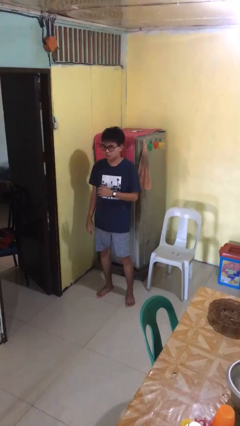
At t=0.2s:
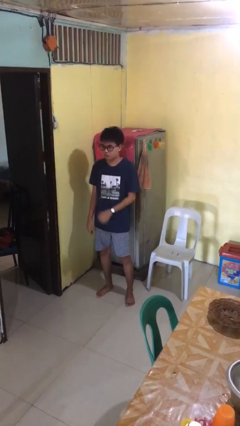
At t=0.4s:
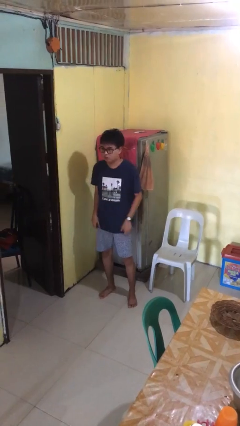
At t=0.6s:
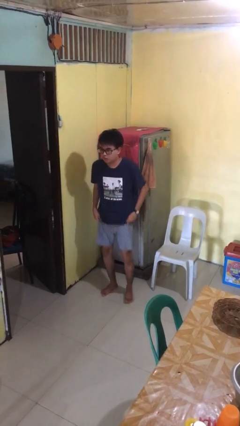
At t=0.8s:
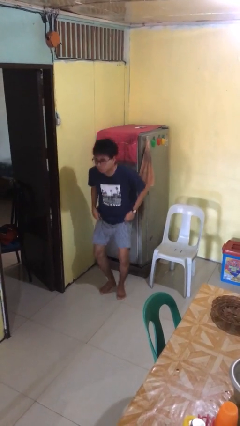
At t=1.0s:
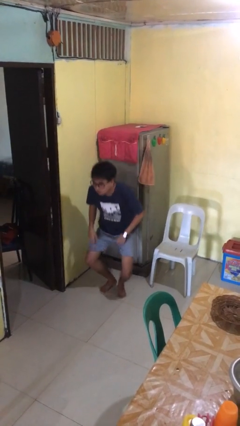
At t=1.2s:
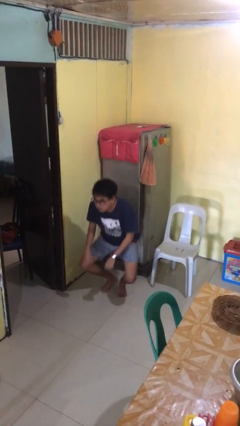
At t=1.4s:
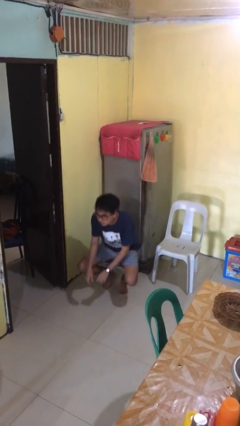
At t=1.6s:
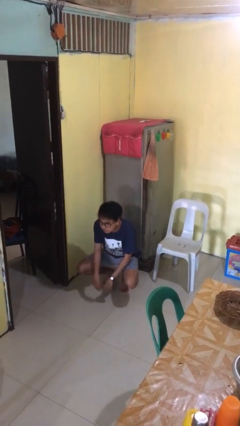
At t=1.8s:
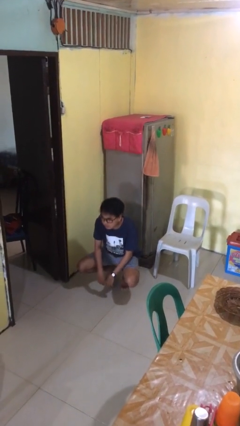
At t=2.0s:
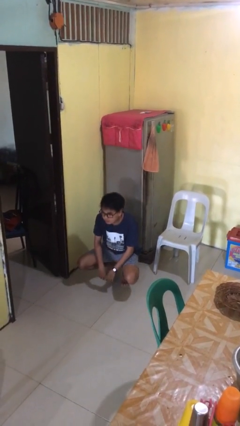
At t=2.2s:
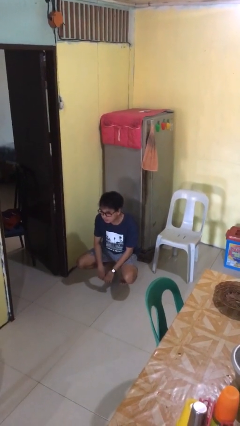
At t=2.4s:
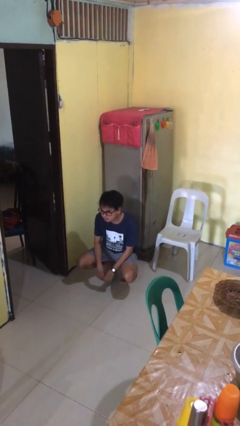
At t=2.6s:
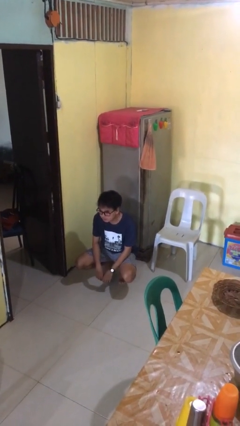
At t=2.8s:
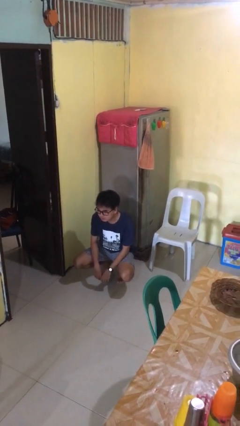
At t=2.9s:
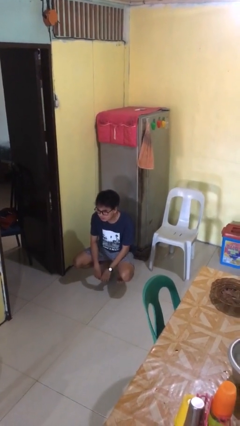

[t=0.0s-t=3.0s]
person squats

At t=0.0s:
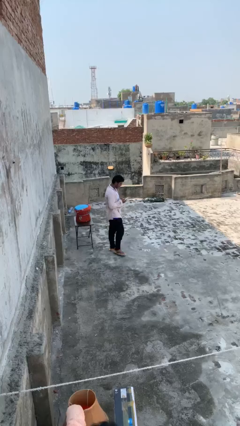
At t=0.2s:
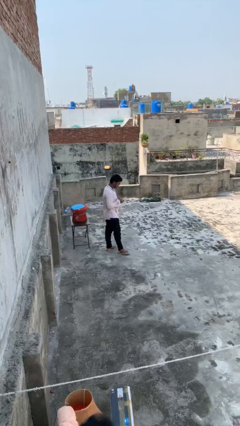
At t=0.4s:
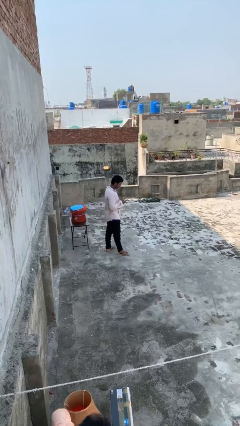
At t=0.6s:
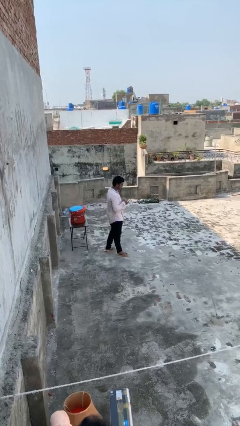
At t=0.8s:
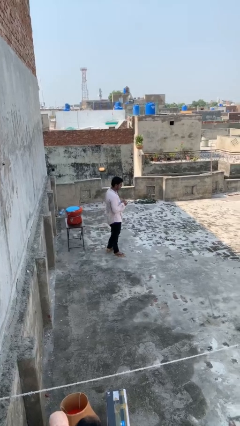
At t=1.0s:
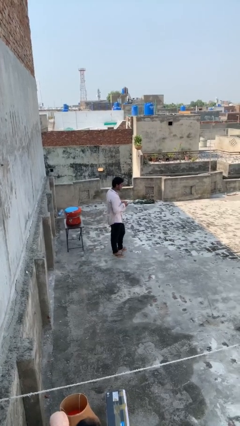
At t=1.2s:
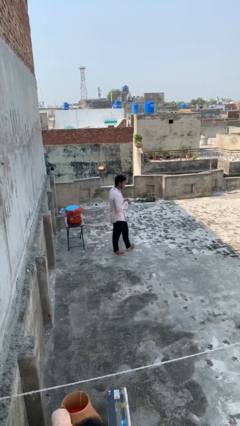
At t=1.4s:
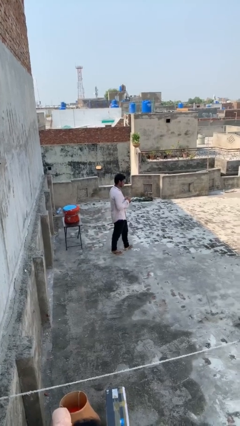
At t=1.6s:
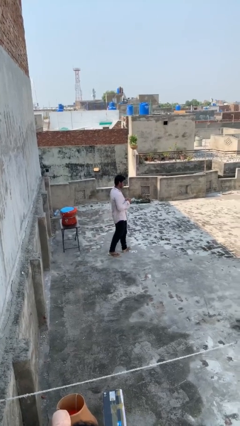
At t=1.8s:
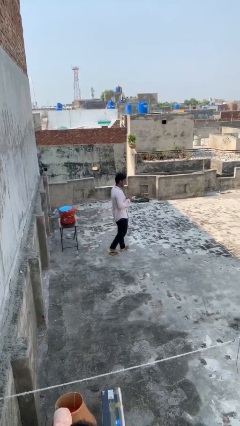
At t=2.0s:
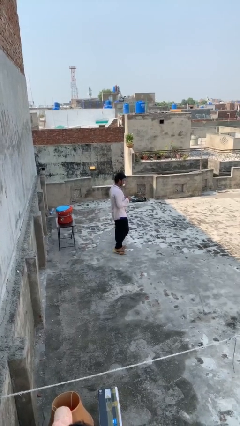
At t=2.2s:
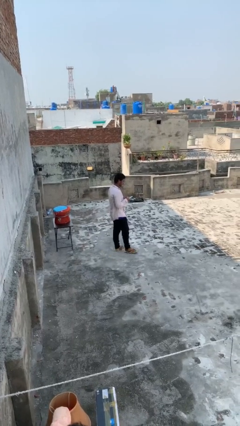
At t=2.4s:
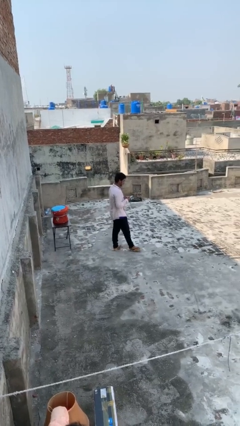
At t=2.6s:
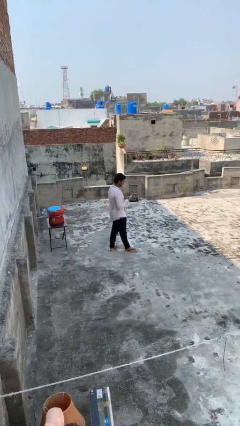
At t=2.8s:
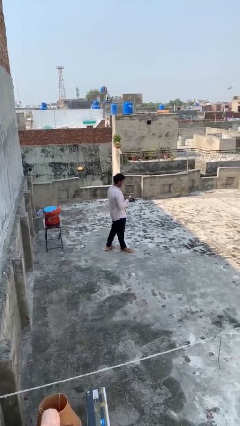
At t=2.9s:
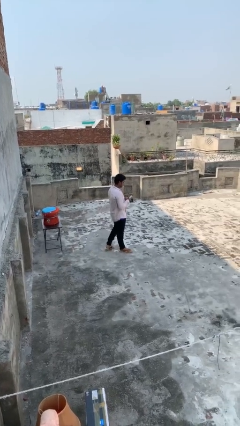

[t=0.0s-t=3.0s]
person texts on phone

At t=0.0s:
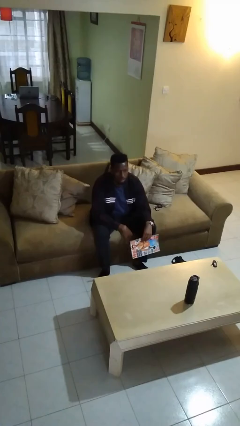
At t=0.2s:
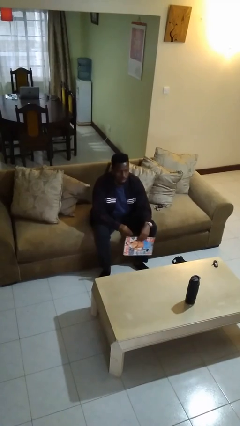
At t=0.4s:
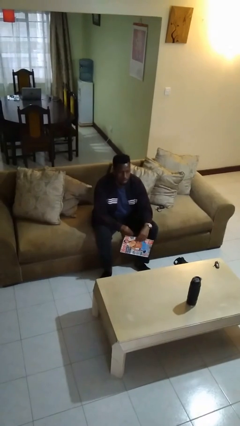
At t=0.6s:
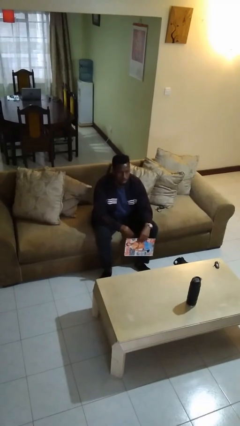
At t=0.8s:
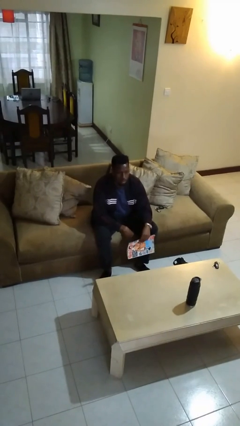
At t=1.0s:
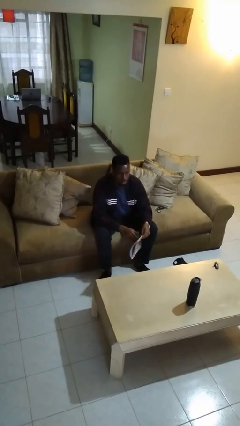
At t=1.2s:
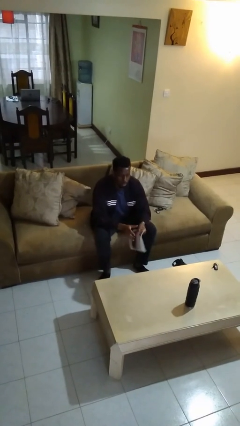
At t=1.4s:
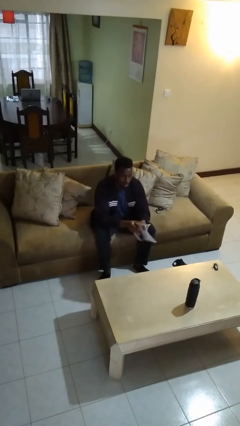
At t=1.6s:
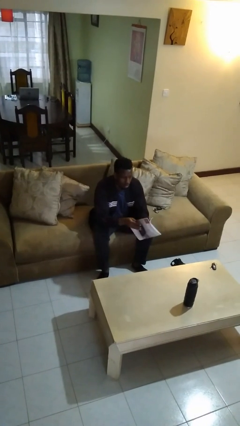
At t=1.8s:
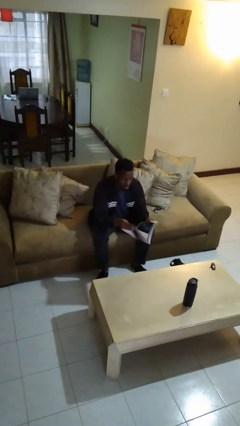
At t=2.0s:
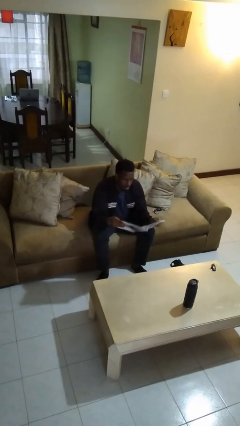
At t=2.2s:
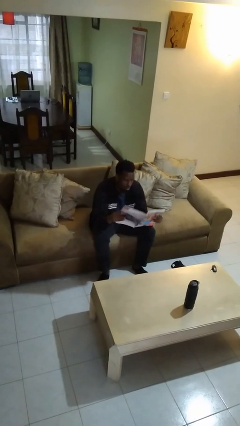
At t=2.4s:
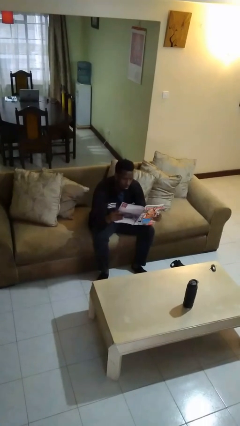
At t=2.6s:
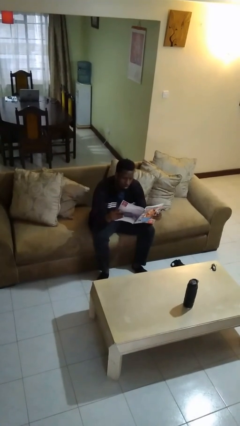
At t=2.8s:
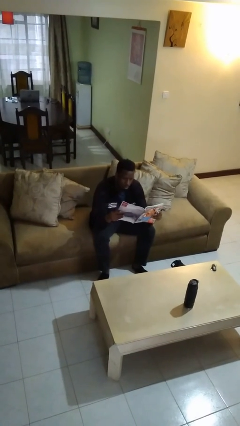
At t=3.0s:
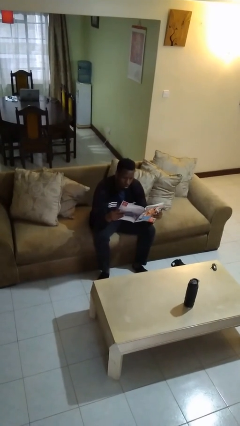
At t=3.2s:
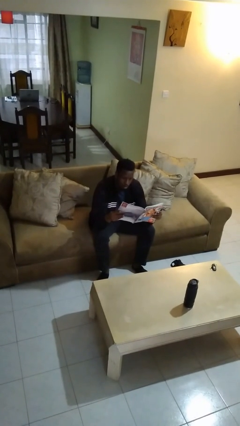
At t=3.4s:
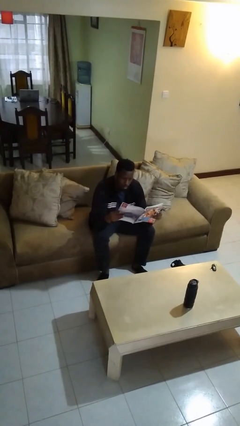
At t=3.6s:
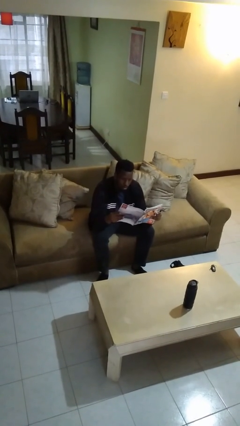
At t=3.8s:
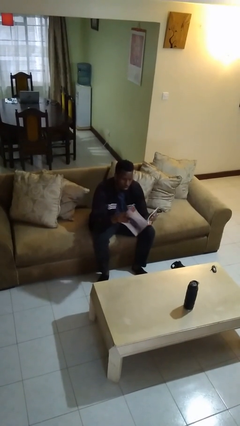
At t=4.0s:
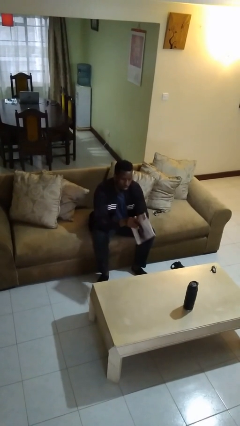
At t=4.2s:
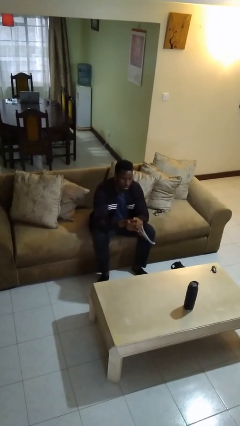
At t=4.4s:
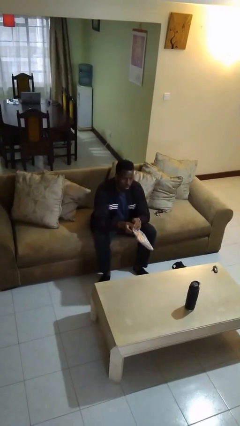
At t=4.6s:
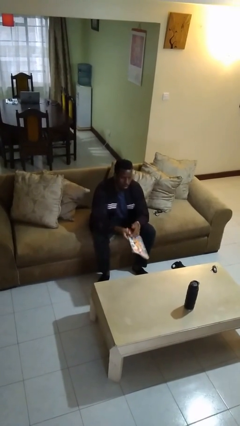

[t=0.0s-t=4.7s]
person reads magazine

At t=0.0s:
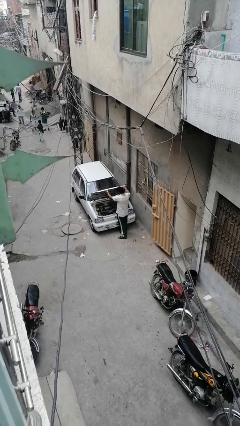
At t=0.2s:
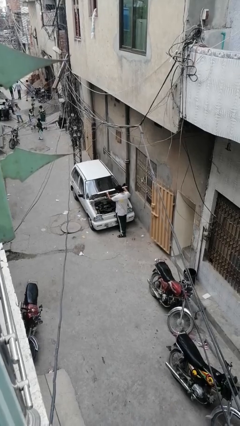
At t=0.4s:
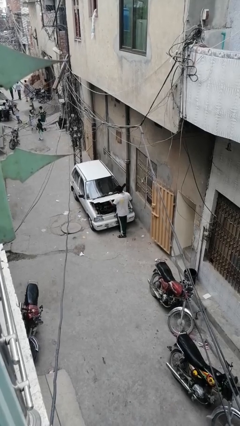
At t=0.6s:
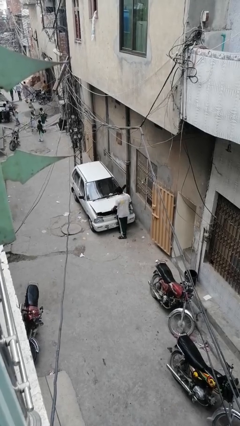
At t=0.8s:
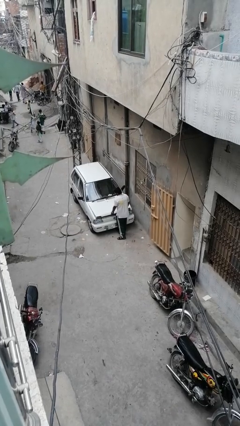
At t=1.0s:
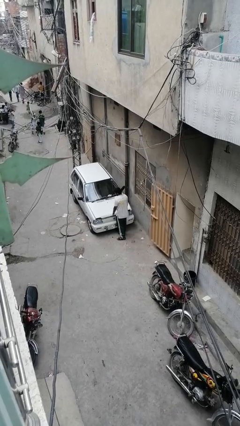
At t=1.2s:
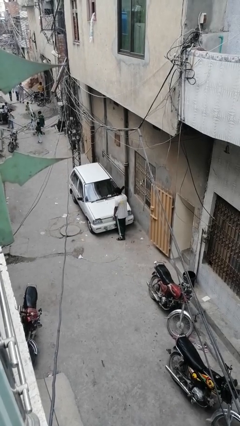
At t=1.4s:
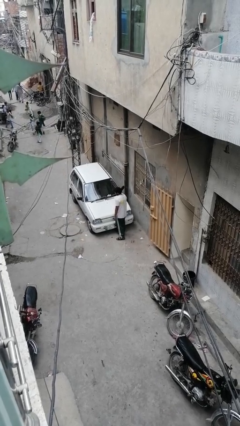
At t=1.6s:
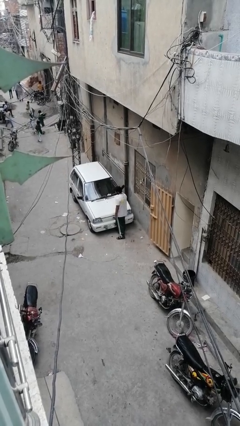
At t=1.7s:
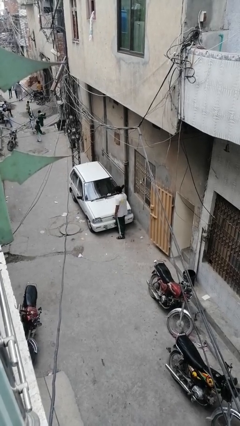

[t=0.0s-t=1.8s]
person closes car hood

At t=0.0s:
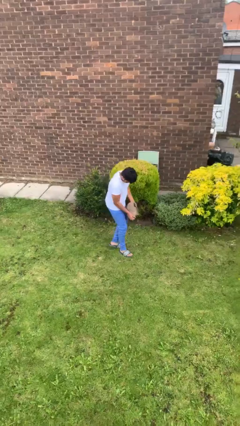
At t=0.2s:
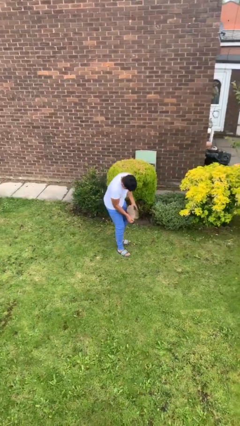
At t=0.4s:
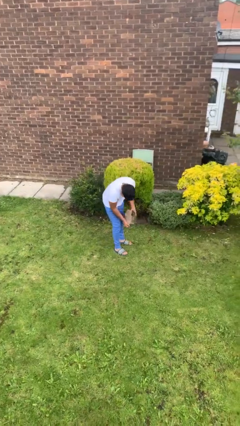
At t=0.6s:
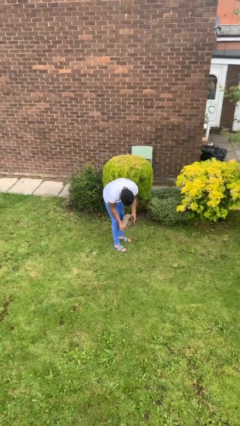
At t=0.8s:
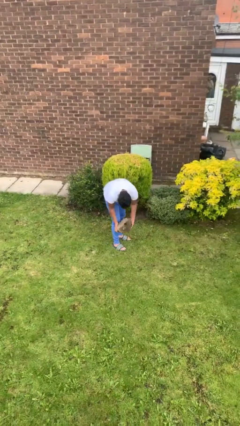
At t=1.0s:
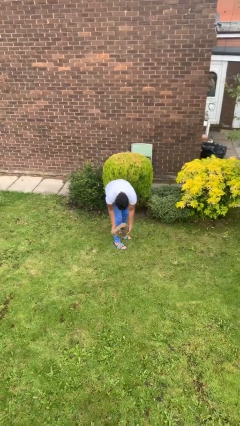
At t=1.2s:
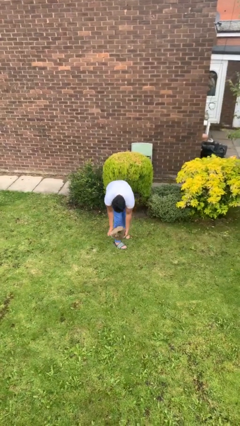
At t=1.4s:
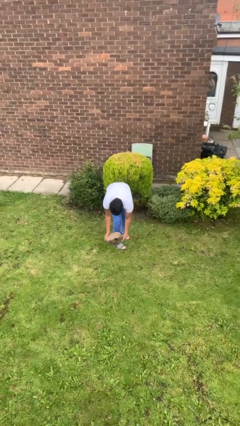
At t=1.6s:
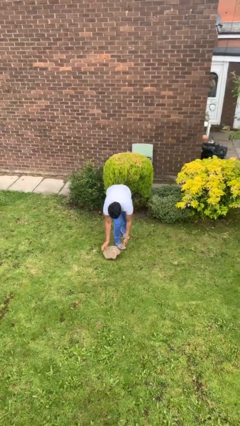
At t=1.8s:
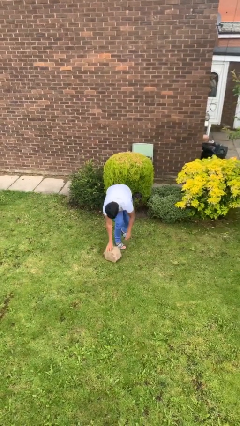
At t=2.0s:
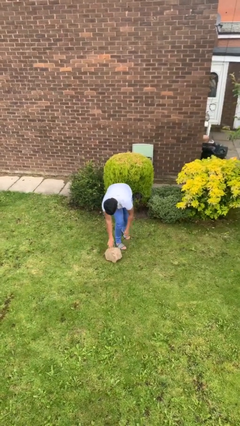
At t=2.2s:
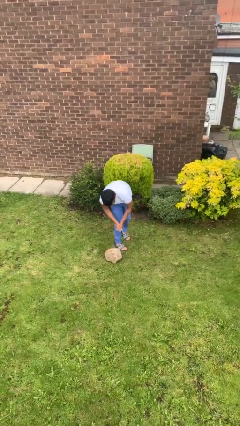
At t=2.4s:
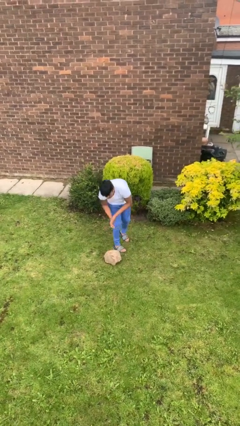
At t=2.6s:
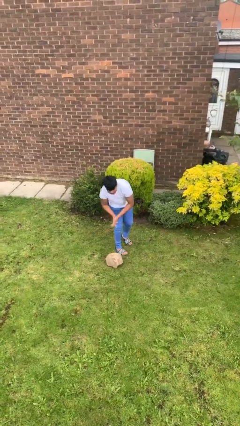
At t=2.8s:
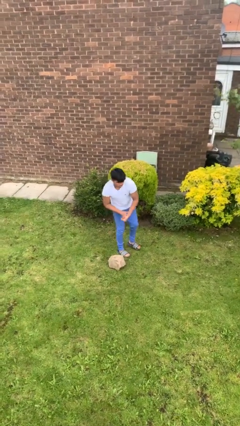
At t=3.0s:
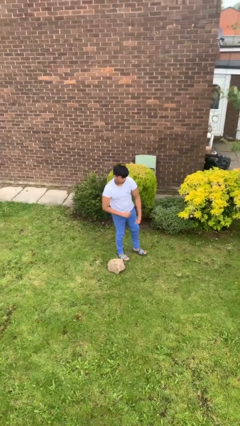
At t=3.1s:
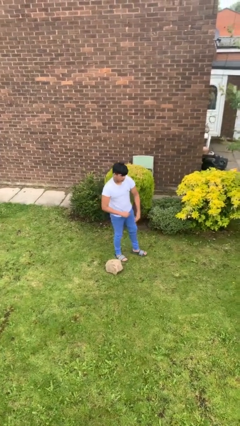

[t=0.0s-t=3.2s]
person puts down object on floor

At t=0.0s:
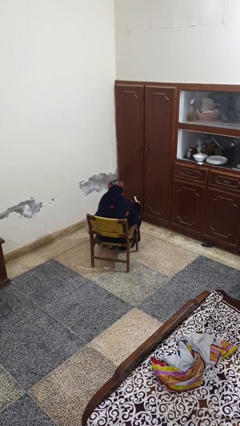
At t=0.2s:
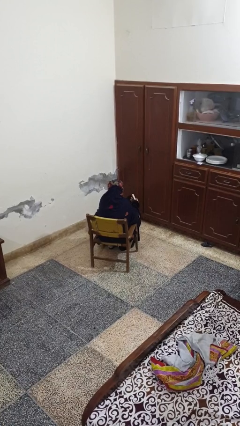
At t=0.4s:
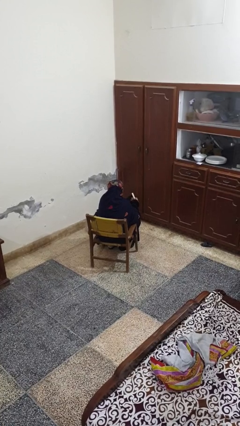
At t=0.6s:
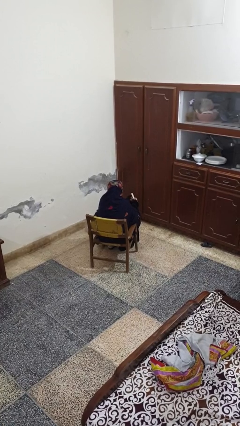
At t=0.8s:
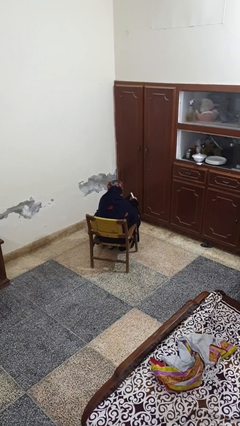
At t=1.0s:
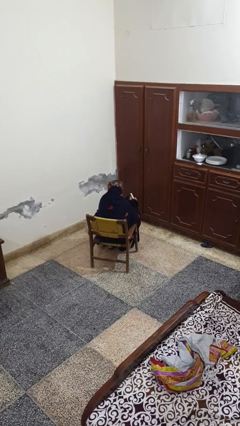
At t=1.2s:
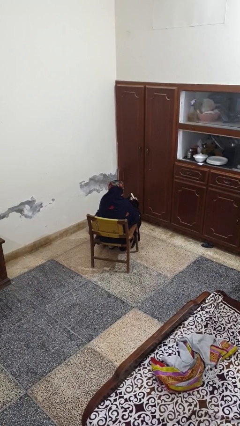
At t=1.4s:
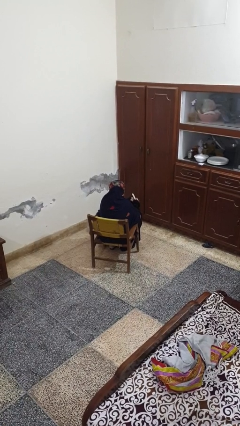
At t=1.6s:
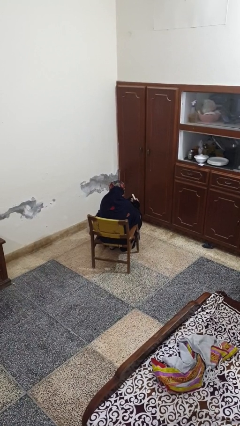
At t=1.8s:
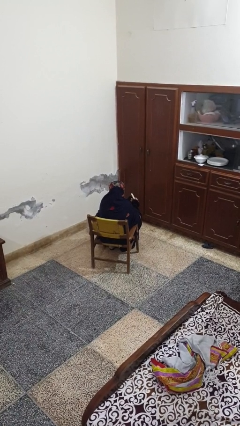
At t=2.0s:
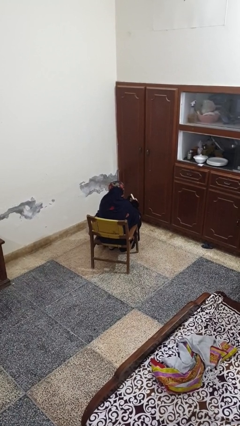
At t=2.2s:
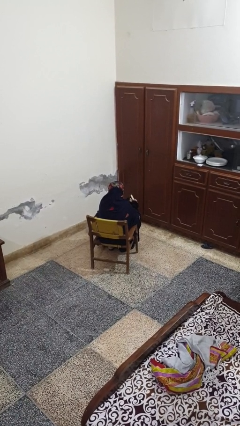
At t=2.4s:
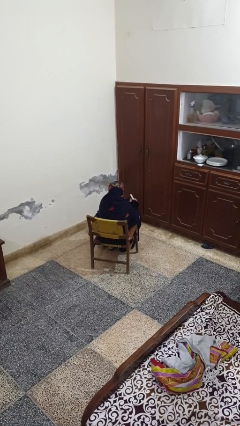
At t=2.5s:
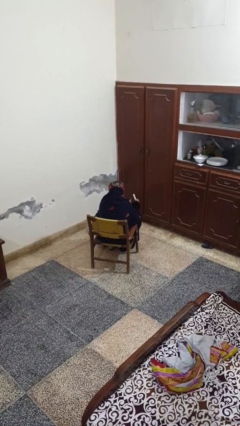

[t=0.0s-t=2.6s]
person files fingernails
